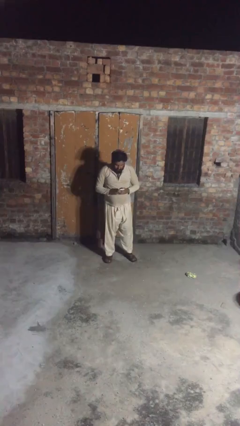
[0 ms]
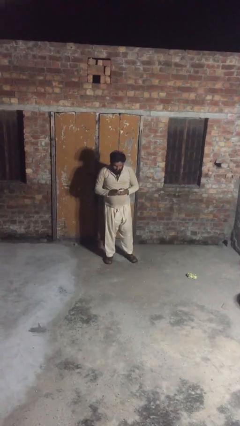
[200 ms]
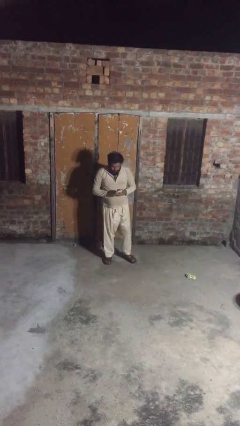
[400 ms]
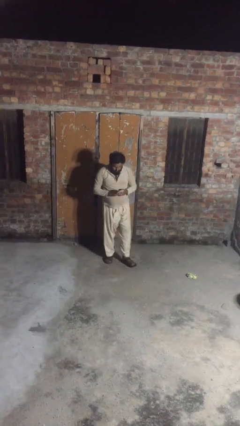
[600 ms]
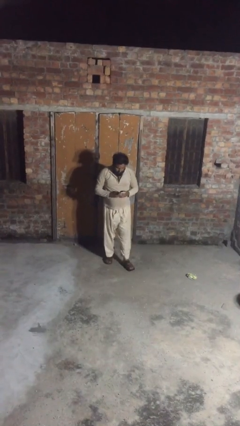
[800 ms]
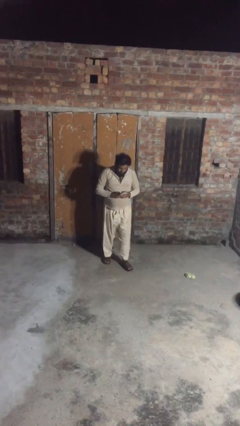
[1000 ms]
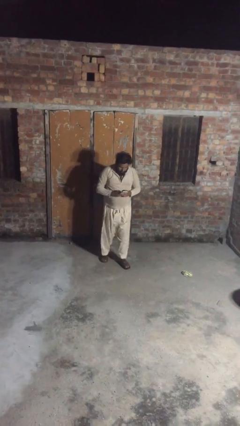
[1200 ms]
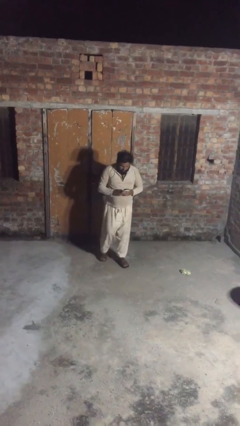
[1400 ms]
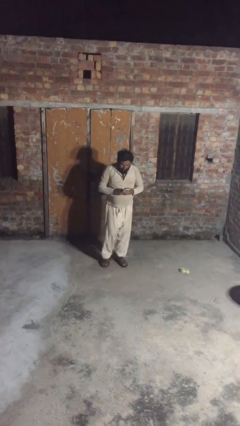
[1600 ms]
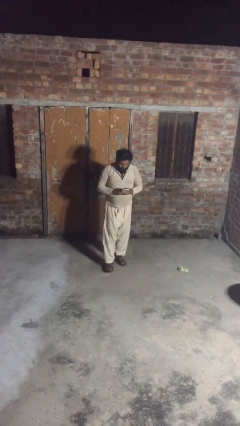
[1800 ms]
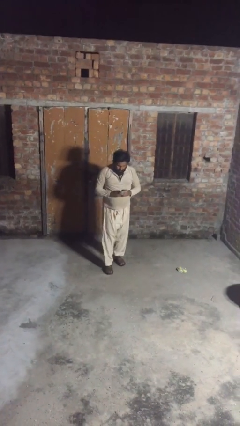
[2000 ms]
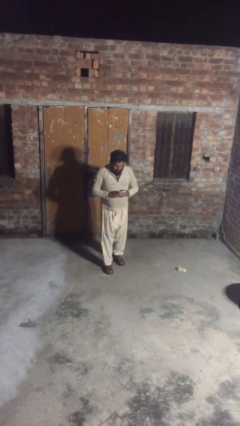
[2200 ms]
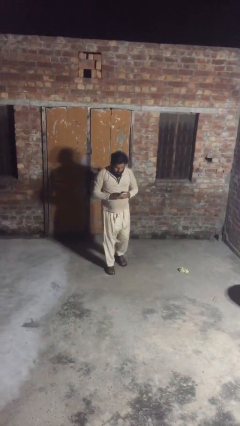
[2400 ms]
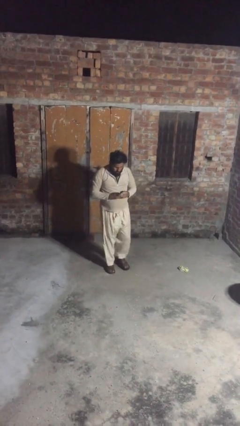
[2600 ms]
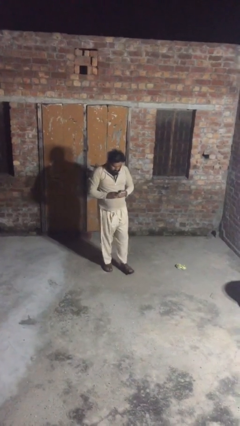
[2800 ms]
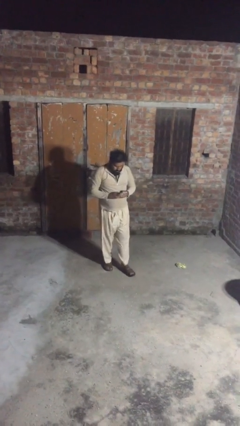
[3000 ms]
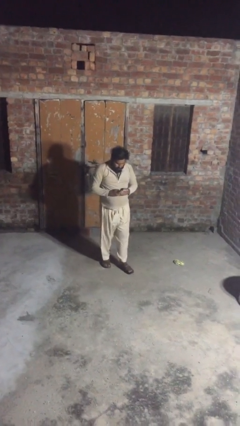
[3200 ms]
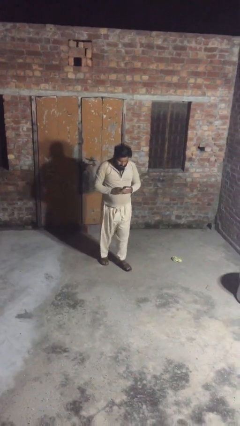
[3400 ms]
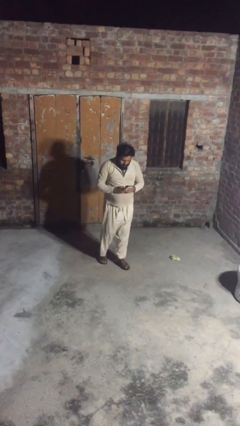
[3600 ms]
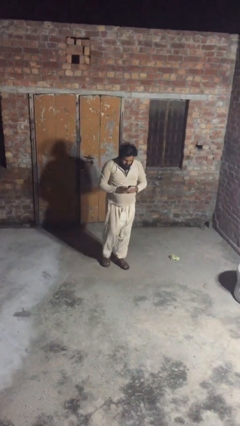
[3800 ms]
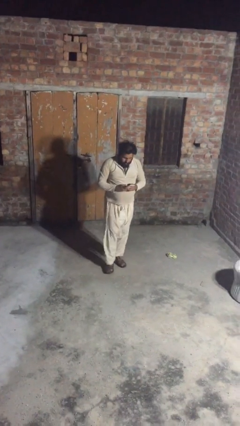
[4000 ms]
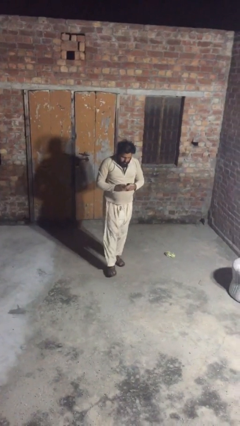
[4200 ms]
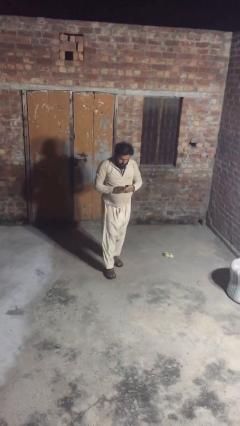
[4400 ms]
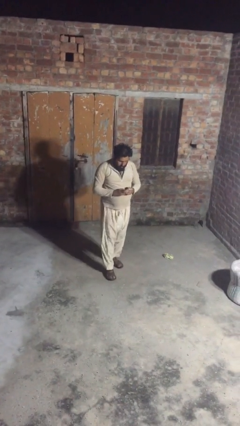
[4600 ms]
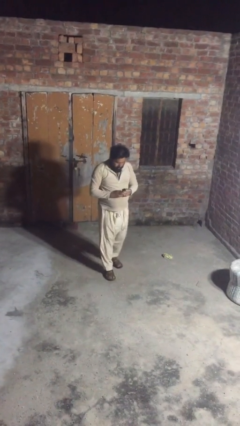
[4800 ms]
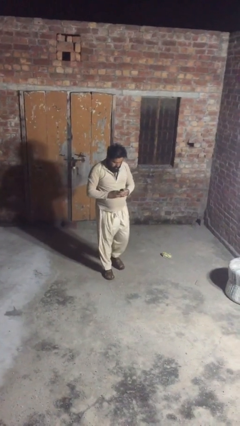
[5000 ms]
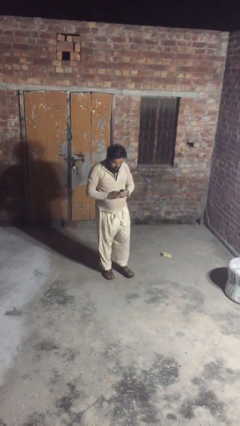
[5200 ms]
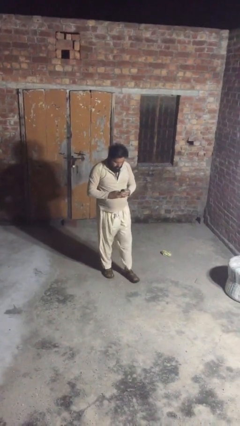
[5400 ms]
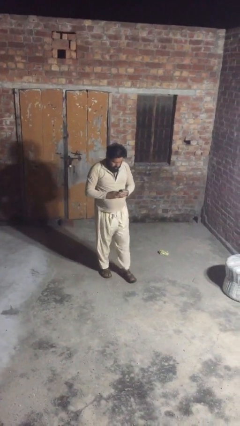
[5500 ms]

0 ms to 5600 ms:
person texts on phone

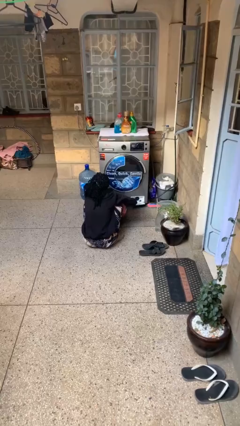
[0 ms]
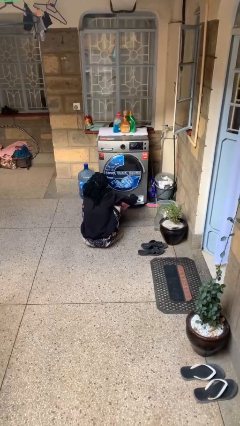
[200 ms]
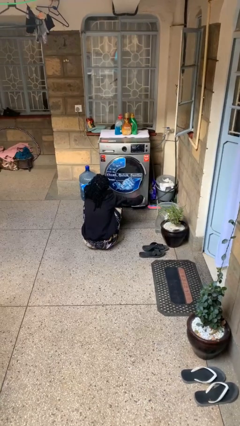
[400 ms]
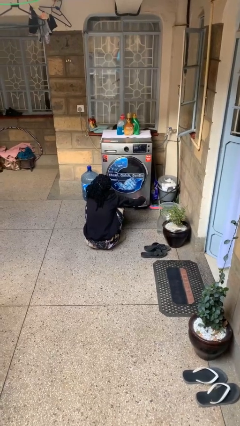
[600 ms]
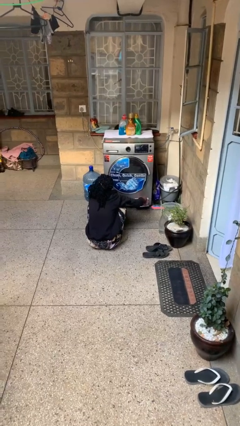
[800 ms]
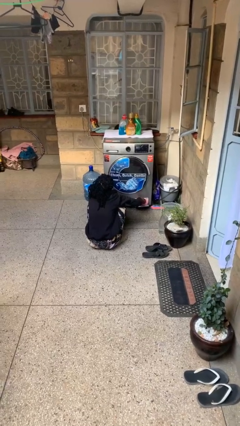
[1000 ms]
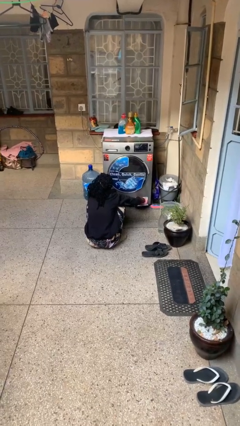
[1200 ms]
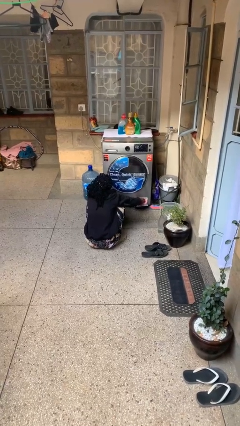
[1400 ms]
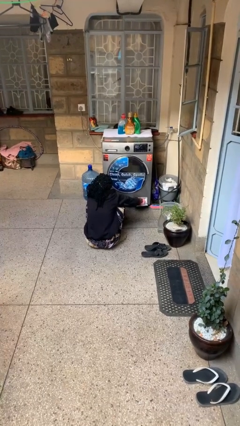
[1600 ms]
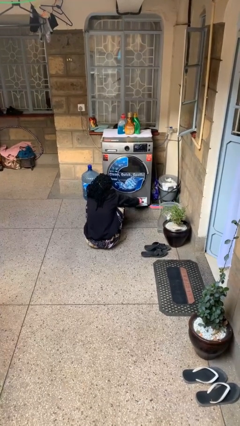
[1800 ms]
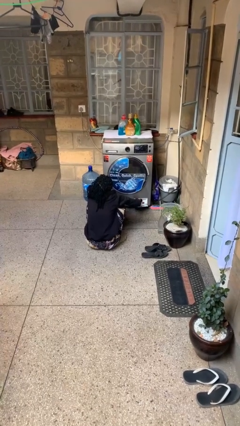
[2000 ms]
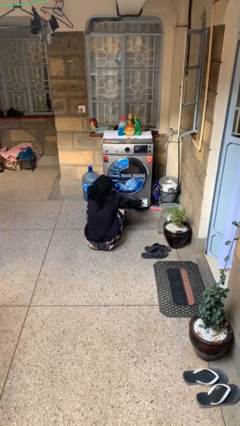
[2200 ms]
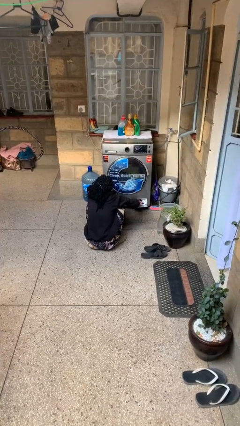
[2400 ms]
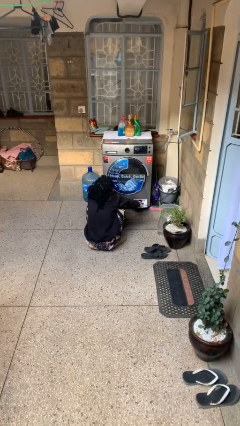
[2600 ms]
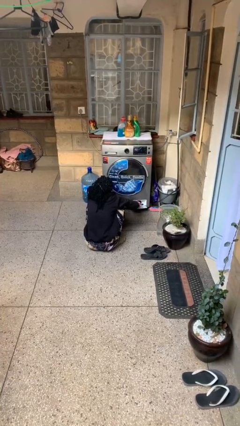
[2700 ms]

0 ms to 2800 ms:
person cleans dryer lint trap

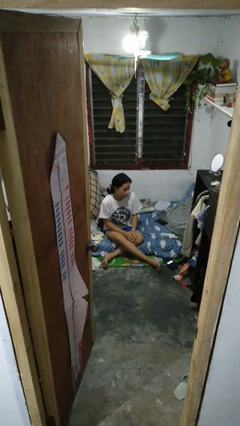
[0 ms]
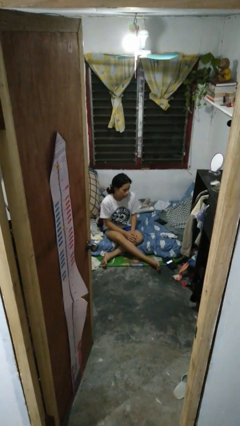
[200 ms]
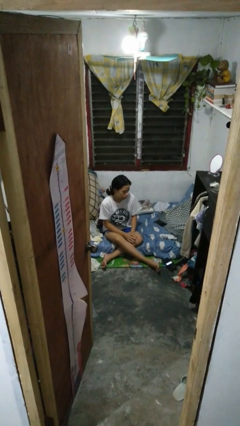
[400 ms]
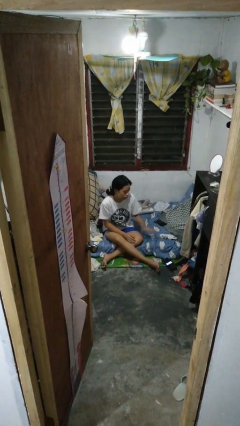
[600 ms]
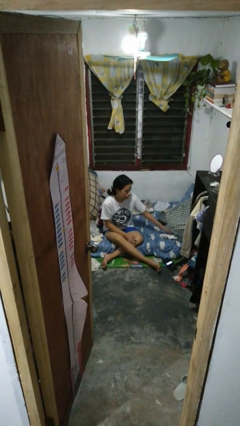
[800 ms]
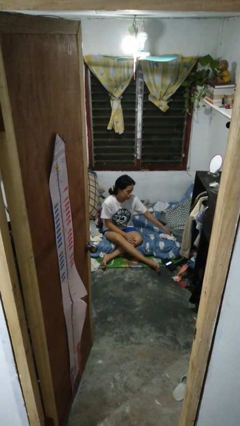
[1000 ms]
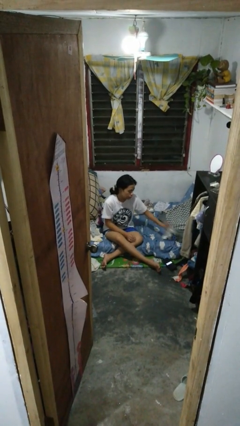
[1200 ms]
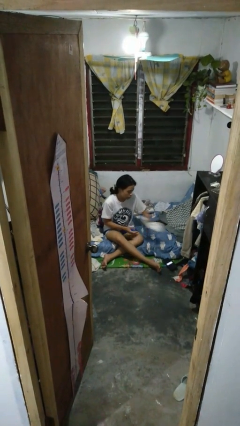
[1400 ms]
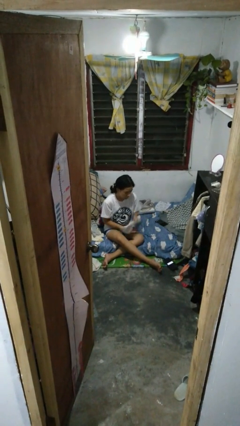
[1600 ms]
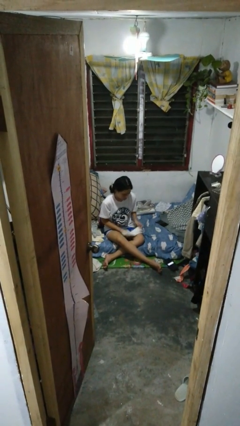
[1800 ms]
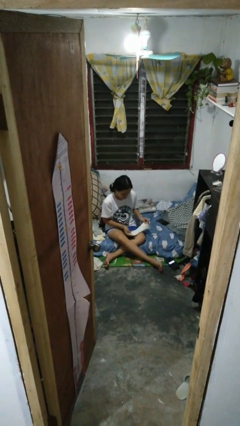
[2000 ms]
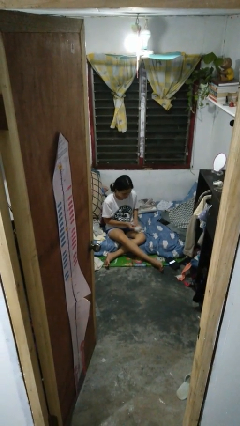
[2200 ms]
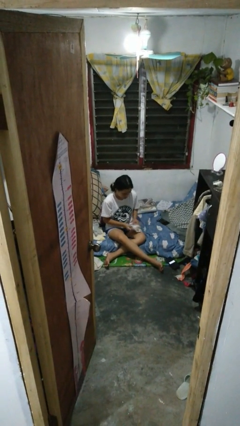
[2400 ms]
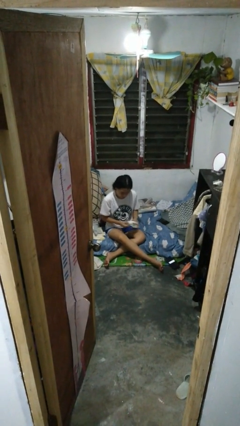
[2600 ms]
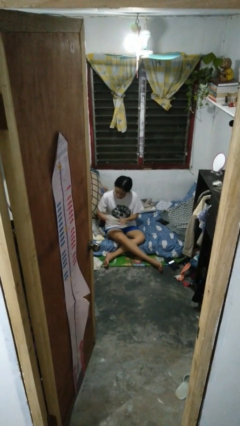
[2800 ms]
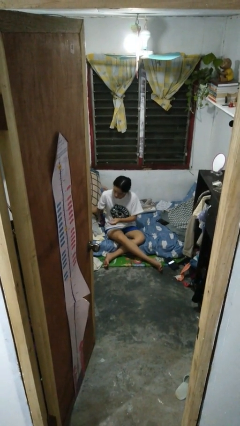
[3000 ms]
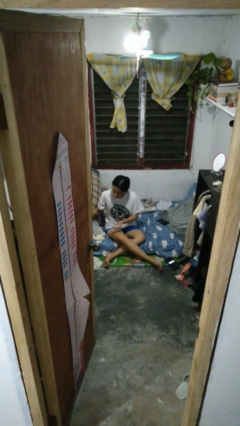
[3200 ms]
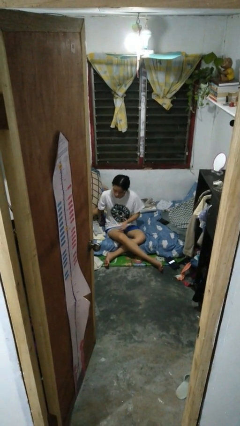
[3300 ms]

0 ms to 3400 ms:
person folds socks

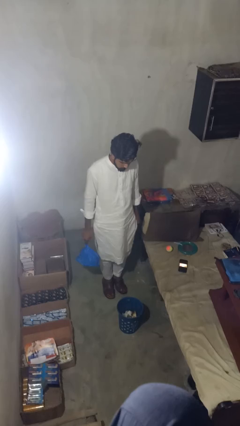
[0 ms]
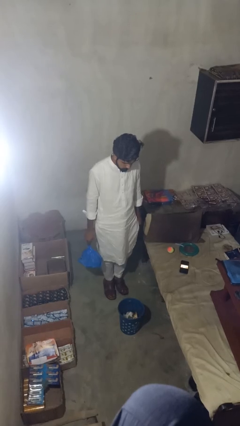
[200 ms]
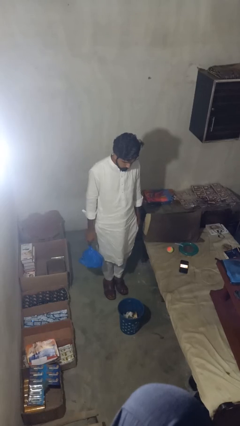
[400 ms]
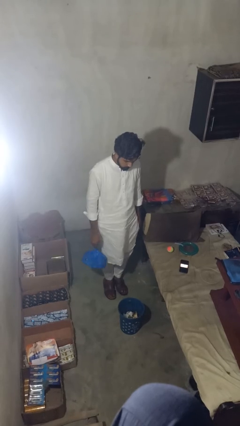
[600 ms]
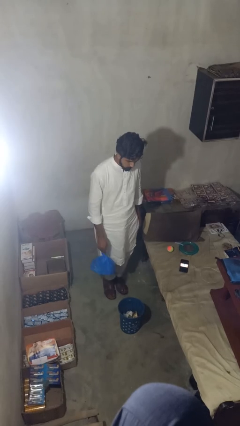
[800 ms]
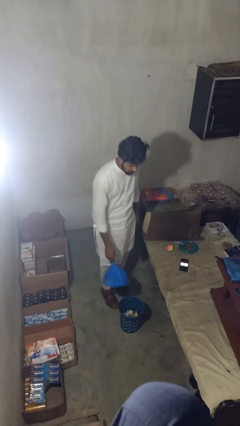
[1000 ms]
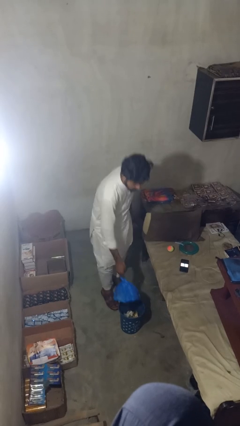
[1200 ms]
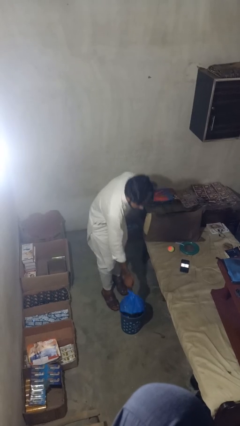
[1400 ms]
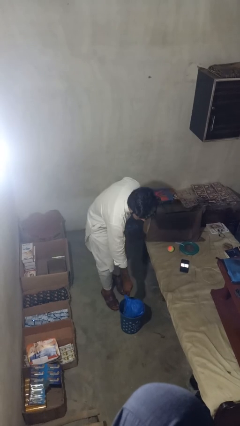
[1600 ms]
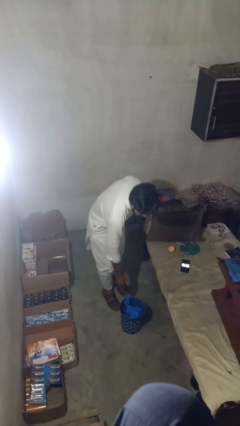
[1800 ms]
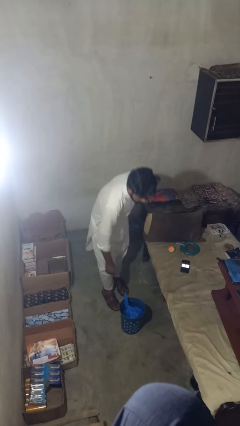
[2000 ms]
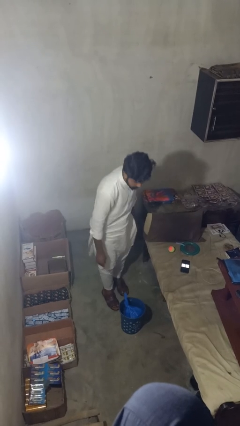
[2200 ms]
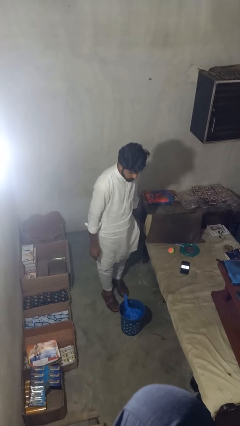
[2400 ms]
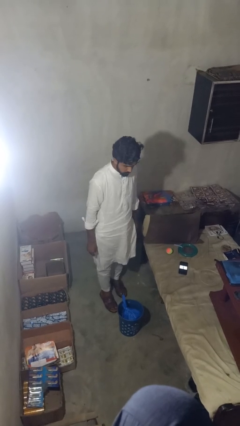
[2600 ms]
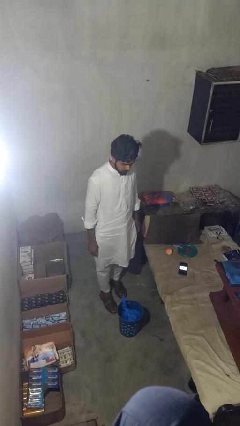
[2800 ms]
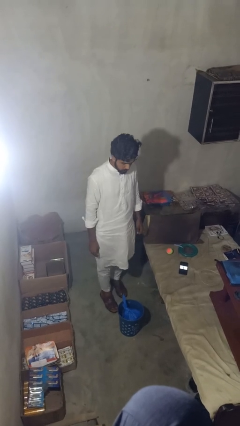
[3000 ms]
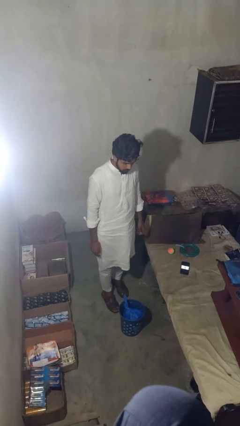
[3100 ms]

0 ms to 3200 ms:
person puts object into basket

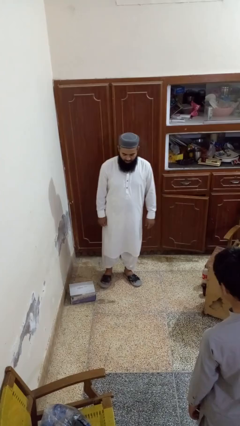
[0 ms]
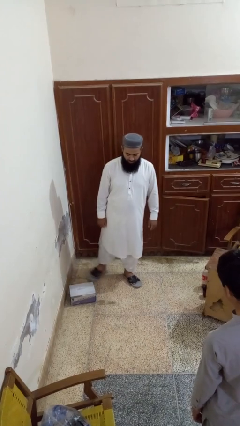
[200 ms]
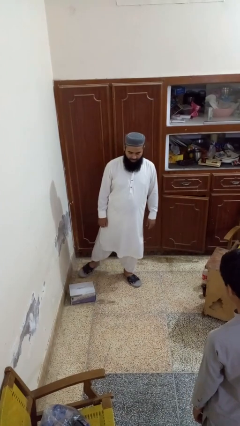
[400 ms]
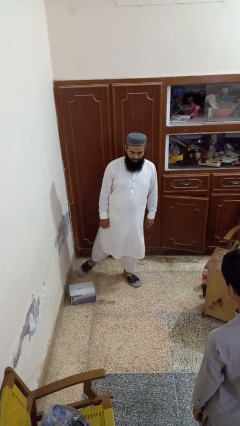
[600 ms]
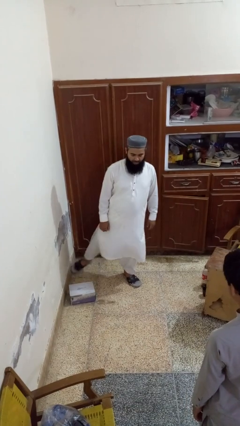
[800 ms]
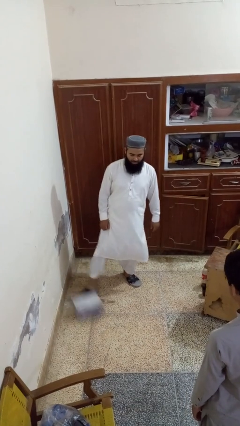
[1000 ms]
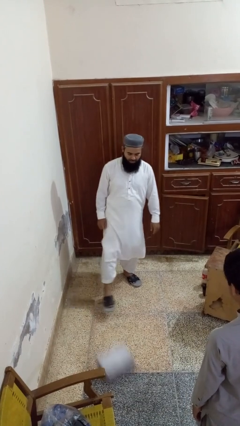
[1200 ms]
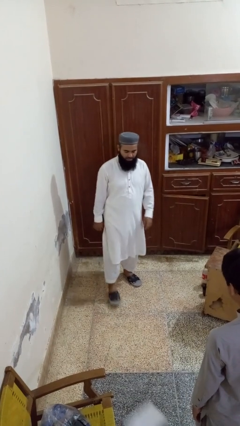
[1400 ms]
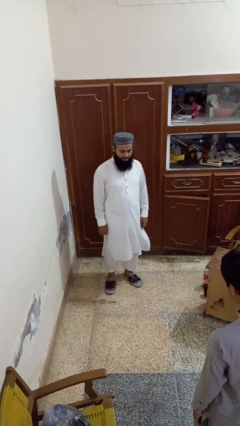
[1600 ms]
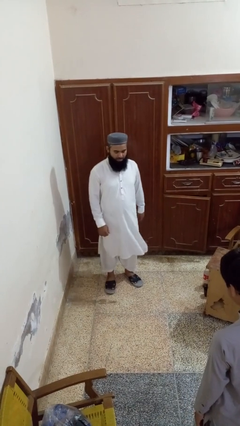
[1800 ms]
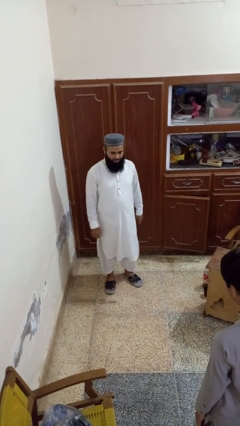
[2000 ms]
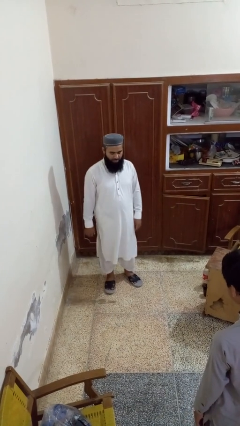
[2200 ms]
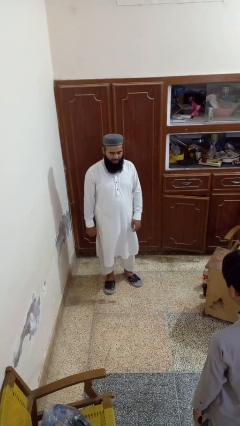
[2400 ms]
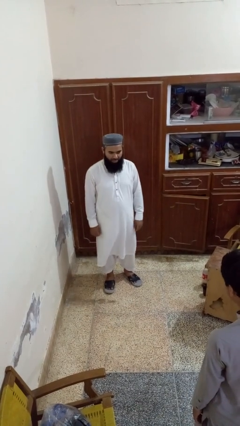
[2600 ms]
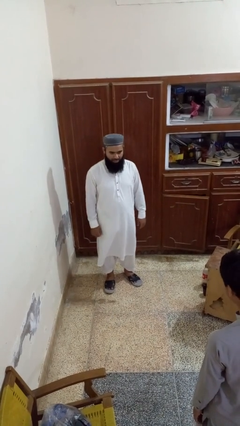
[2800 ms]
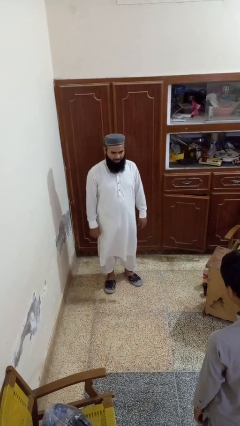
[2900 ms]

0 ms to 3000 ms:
person kicks object to person

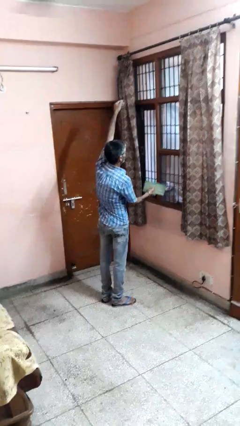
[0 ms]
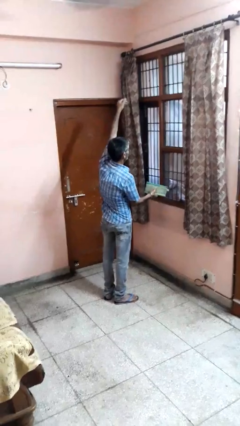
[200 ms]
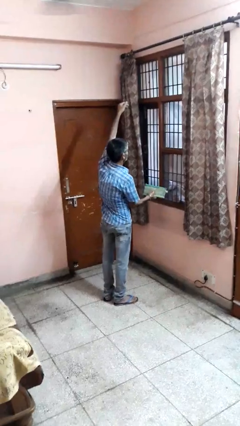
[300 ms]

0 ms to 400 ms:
person catches dropped object
